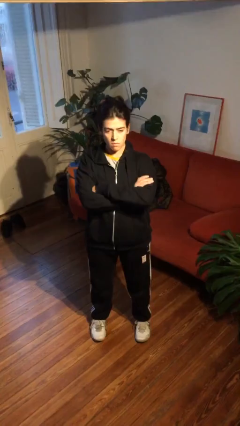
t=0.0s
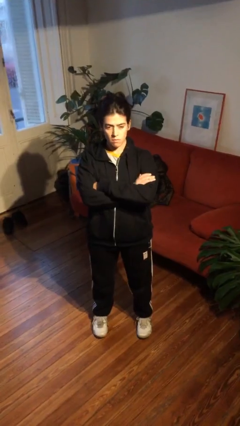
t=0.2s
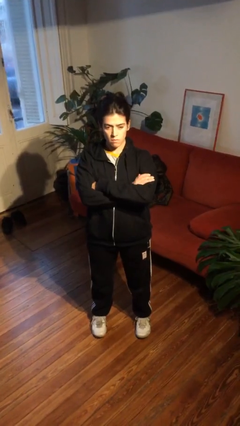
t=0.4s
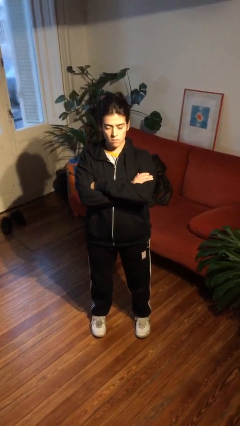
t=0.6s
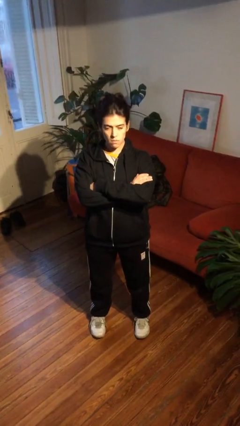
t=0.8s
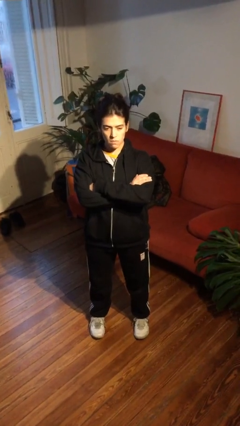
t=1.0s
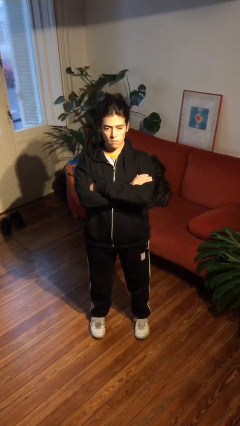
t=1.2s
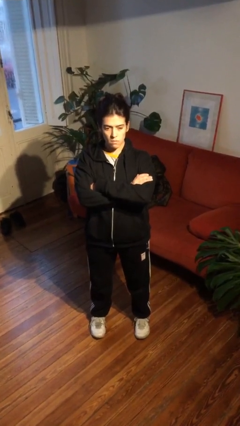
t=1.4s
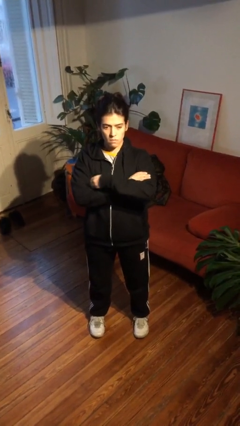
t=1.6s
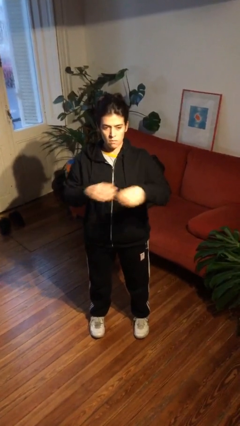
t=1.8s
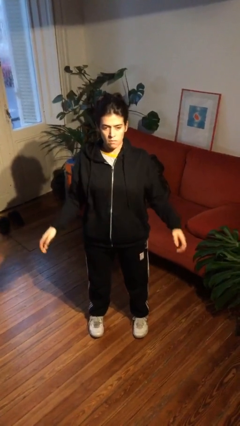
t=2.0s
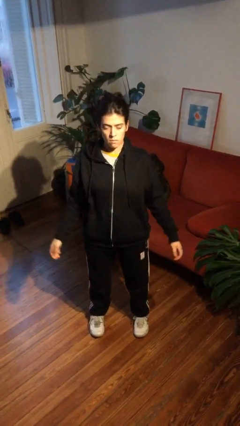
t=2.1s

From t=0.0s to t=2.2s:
person crosses arms

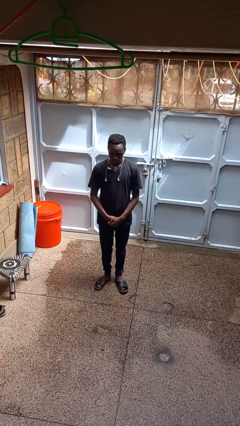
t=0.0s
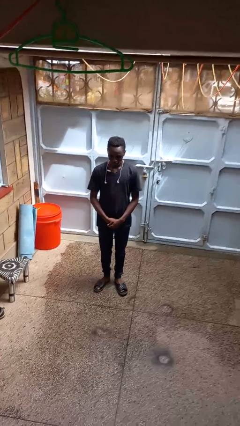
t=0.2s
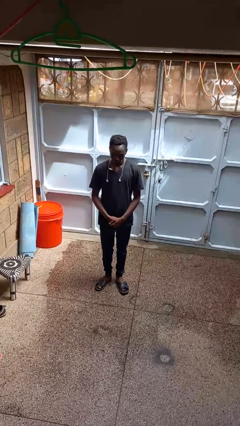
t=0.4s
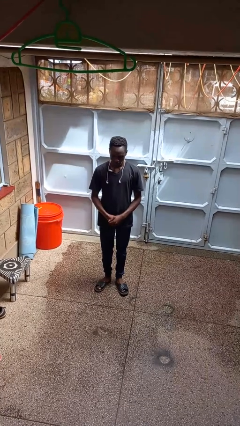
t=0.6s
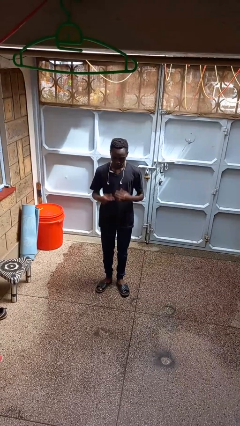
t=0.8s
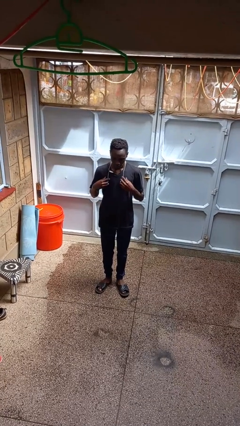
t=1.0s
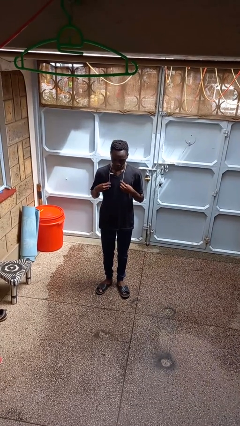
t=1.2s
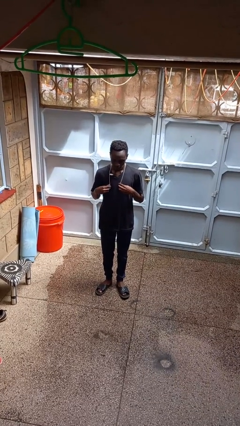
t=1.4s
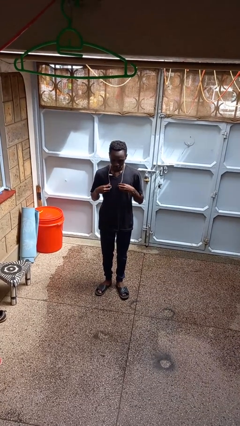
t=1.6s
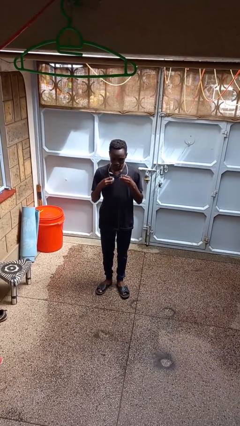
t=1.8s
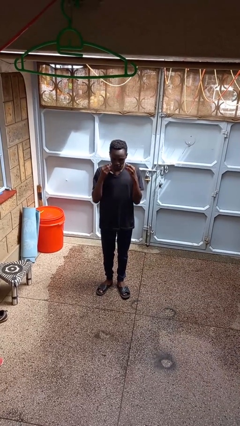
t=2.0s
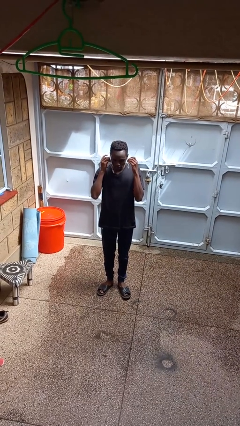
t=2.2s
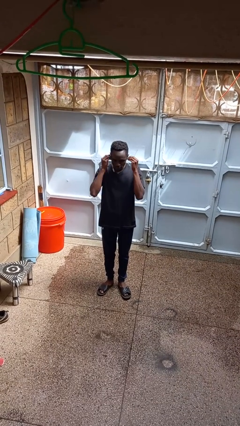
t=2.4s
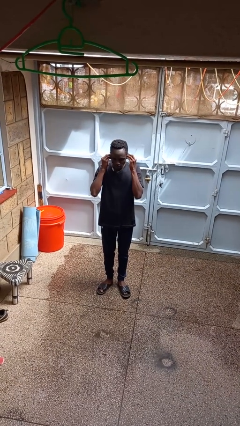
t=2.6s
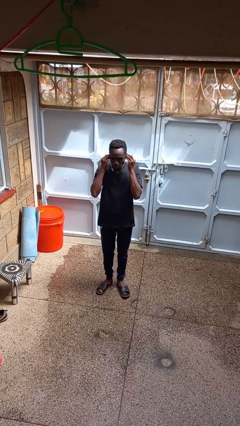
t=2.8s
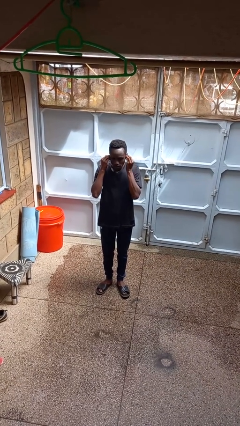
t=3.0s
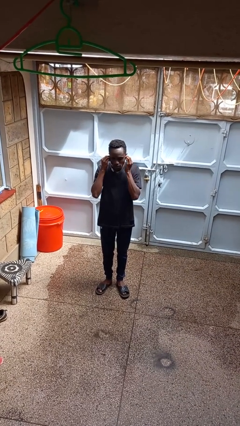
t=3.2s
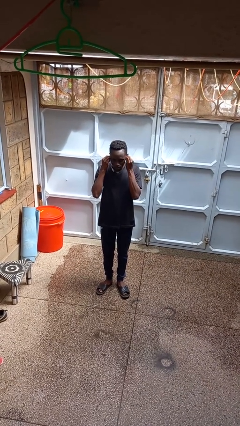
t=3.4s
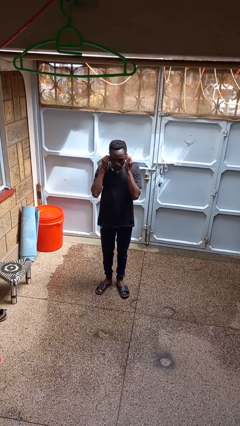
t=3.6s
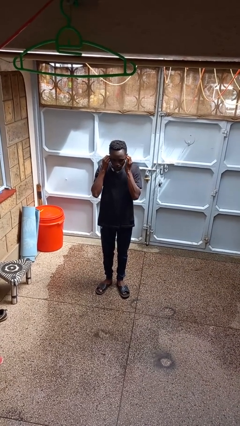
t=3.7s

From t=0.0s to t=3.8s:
person puts on headphones

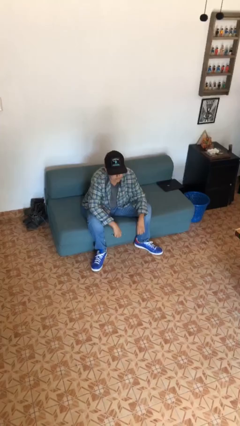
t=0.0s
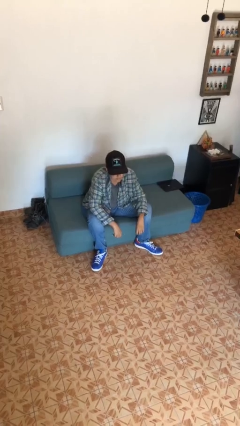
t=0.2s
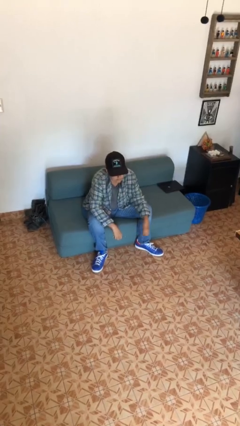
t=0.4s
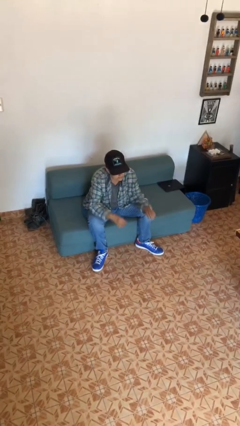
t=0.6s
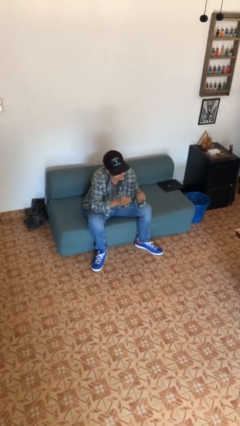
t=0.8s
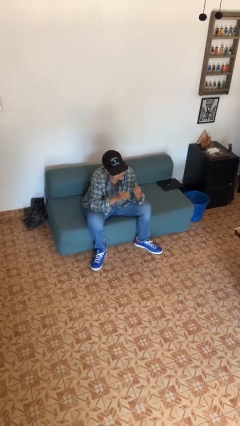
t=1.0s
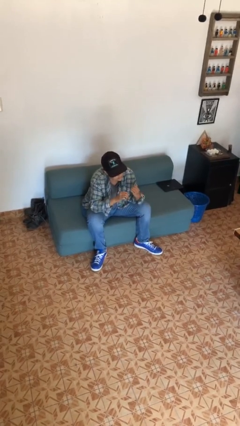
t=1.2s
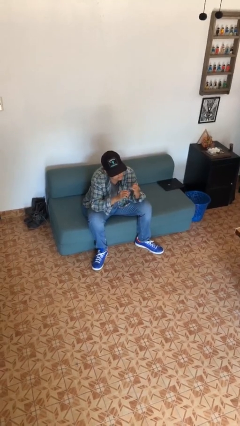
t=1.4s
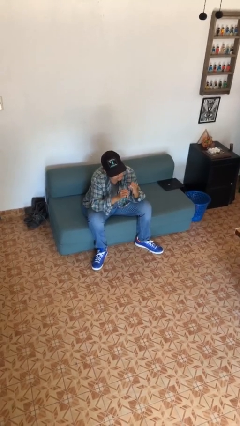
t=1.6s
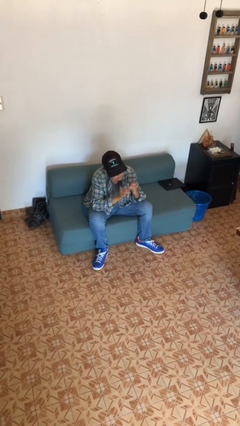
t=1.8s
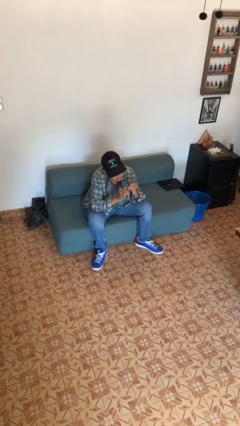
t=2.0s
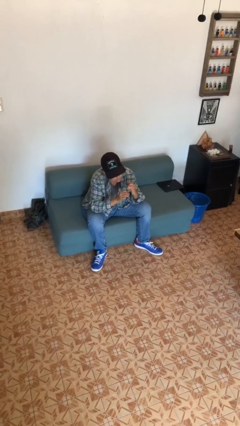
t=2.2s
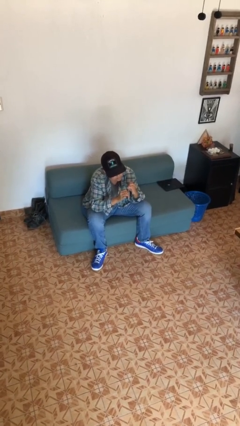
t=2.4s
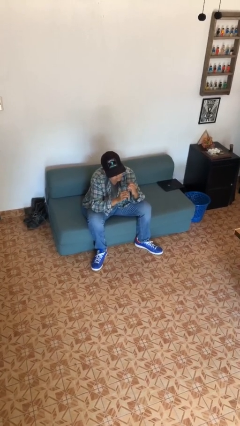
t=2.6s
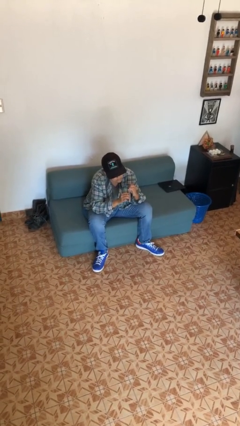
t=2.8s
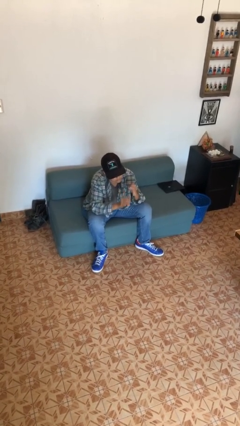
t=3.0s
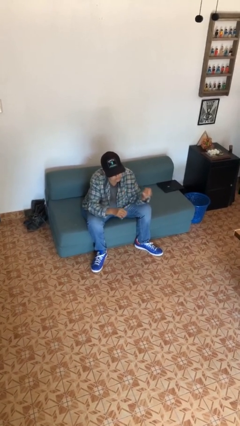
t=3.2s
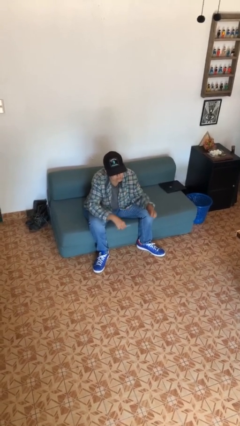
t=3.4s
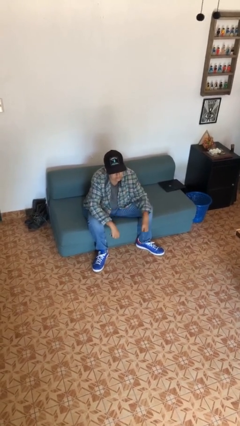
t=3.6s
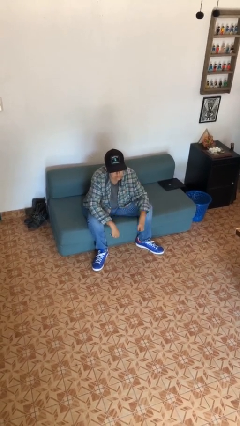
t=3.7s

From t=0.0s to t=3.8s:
person files fingernails

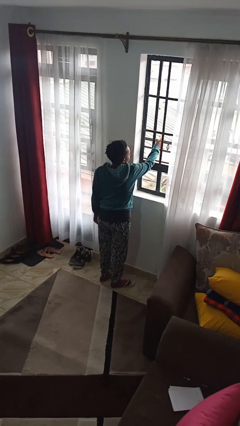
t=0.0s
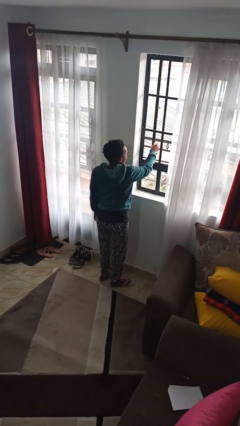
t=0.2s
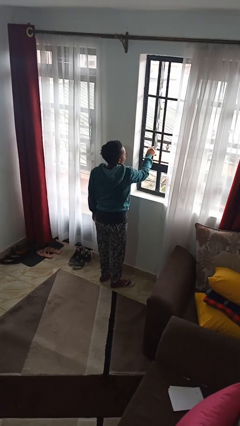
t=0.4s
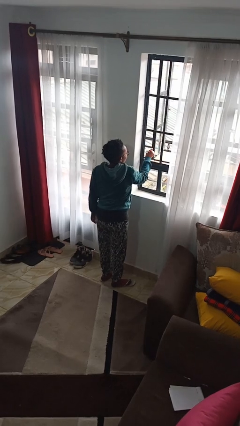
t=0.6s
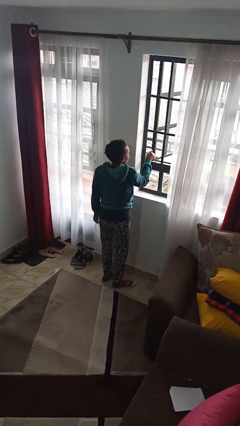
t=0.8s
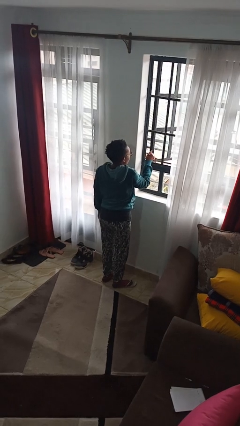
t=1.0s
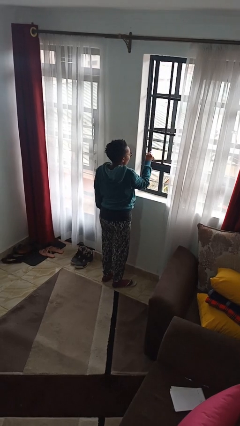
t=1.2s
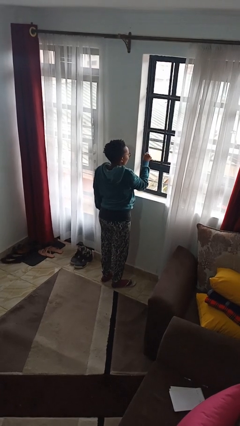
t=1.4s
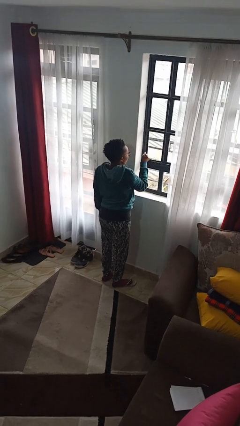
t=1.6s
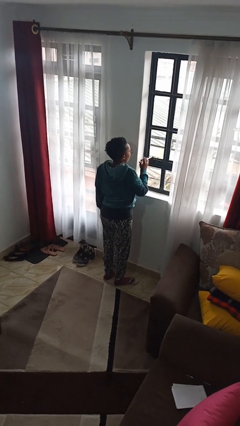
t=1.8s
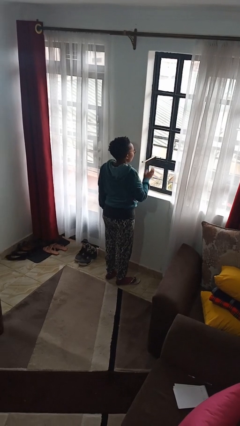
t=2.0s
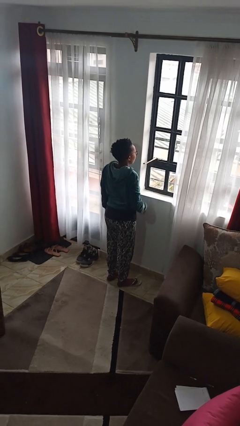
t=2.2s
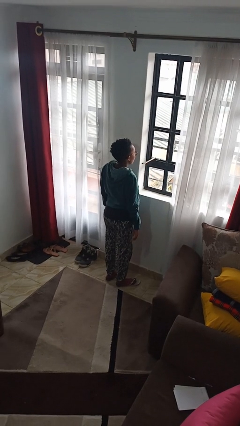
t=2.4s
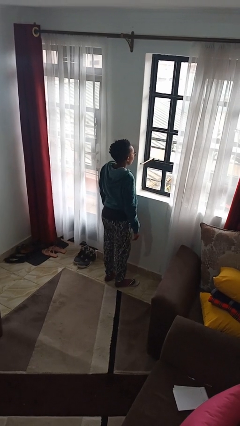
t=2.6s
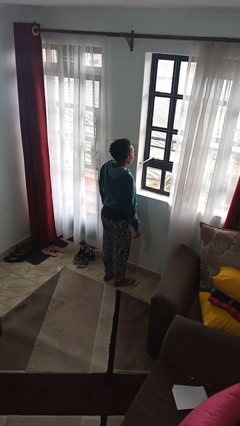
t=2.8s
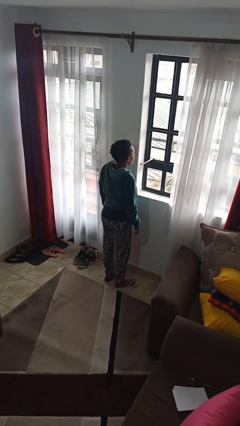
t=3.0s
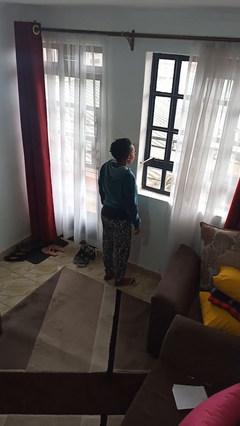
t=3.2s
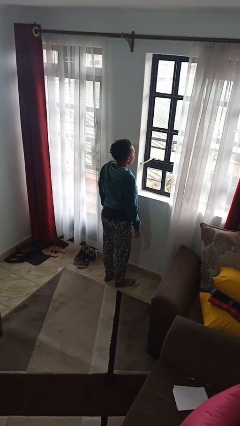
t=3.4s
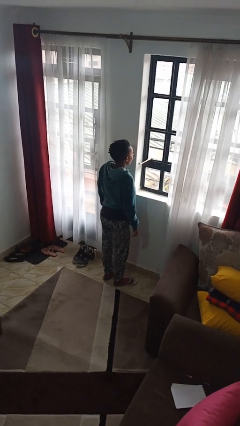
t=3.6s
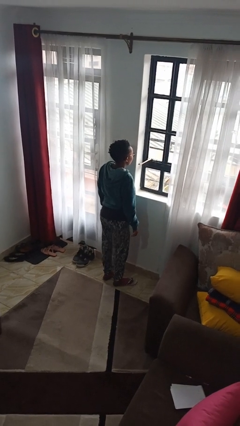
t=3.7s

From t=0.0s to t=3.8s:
person closes home window

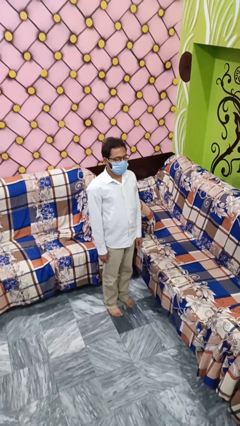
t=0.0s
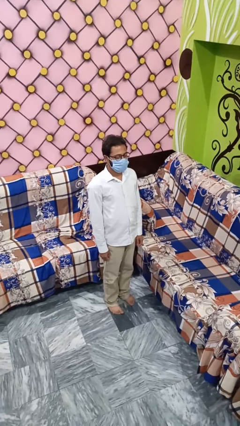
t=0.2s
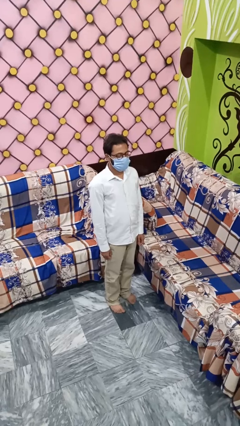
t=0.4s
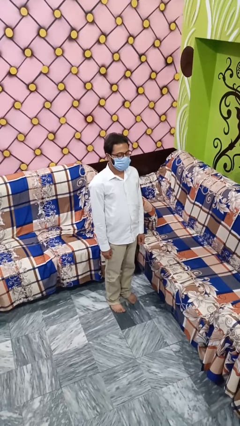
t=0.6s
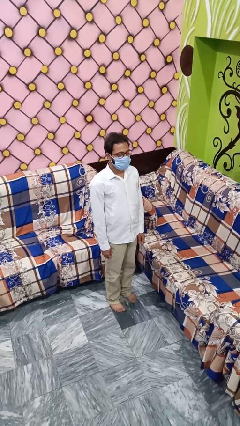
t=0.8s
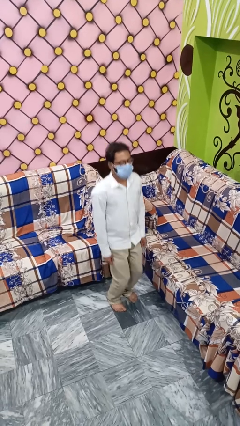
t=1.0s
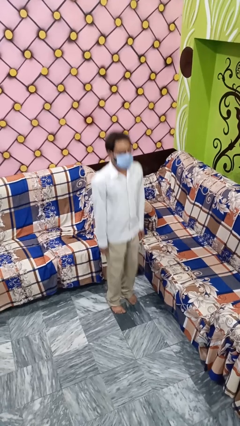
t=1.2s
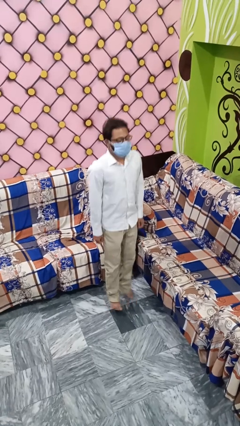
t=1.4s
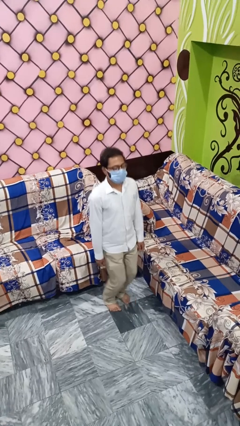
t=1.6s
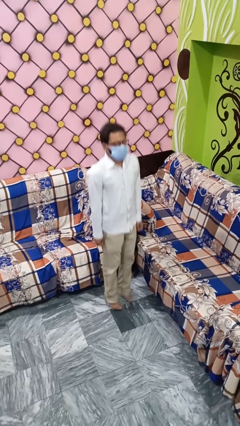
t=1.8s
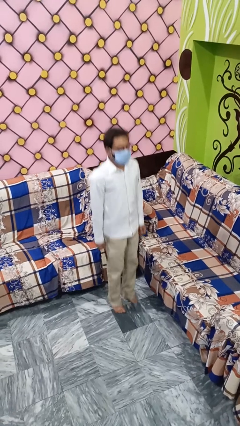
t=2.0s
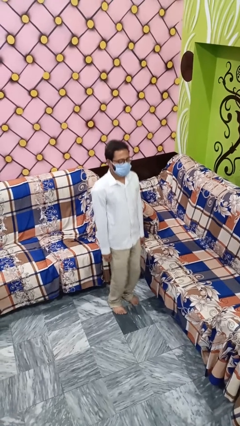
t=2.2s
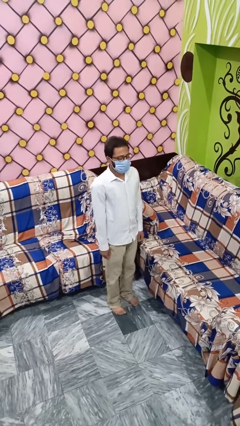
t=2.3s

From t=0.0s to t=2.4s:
person jumps

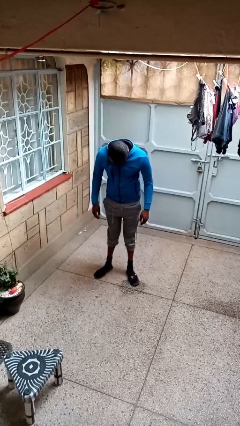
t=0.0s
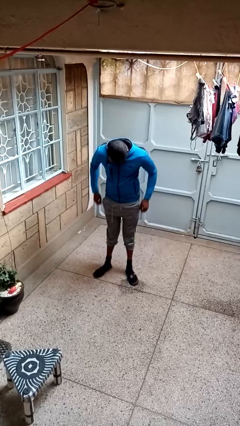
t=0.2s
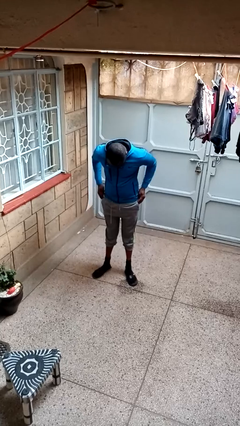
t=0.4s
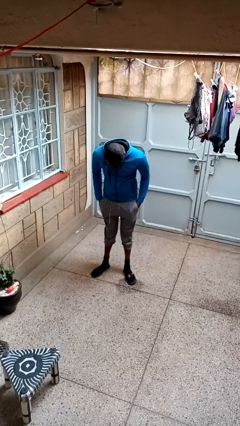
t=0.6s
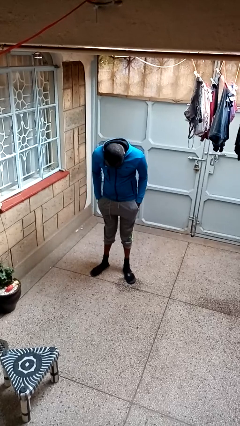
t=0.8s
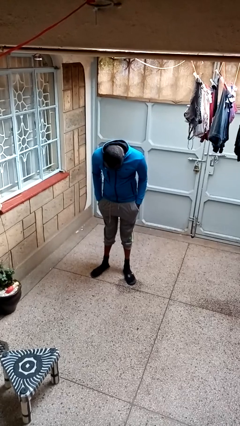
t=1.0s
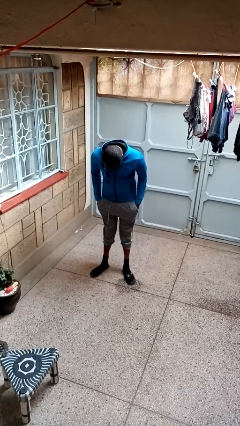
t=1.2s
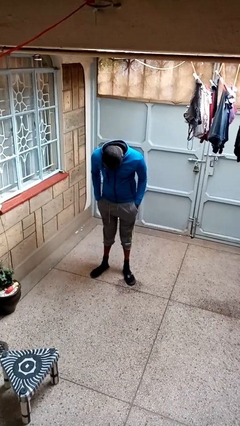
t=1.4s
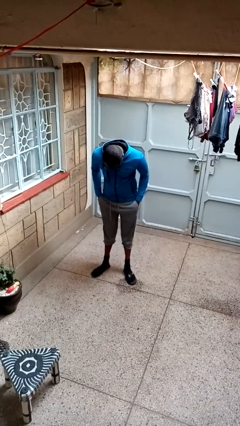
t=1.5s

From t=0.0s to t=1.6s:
person puts hands in back pockets

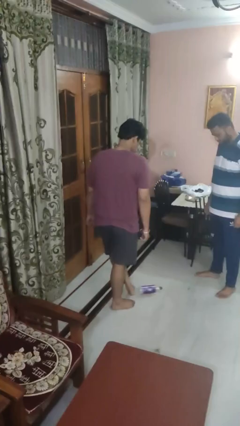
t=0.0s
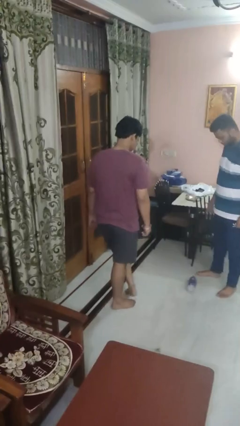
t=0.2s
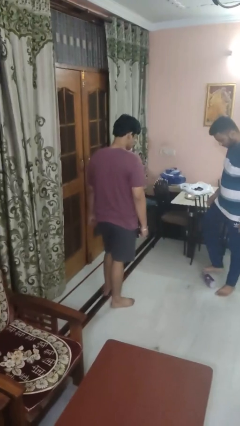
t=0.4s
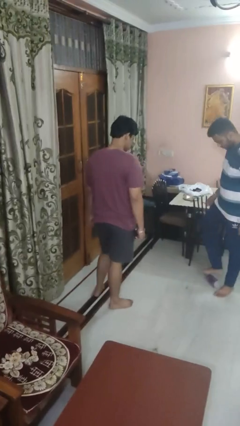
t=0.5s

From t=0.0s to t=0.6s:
person kicks object to person
